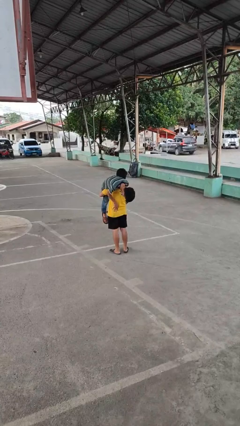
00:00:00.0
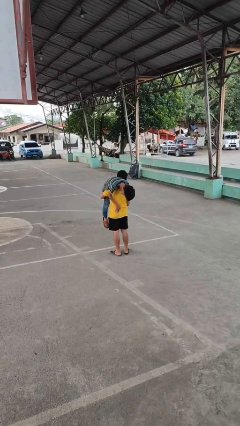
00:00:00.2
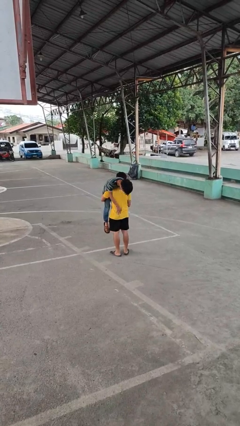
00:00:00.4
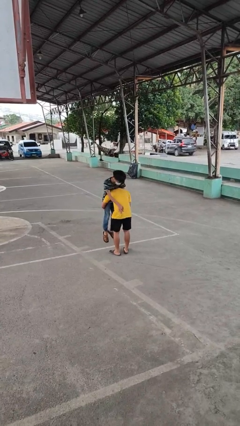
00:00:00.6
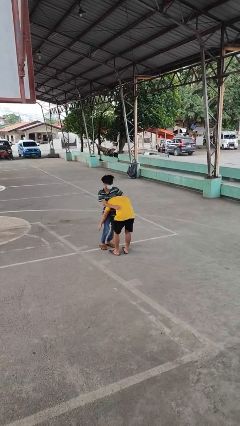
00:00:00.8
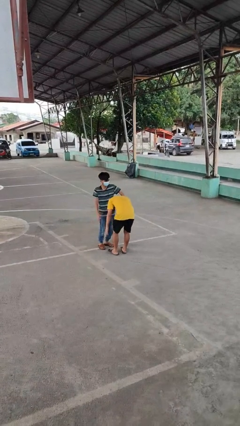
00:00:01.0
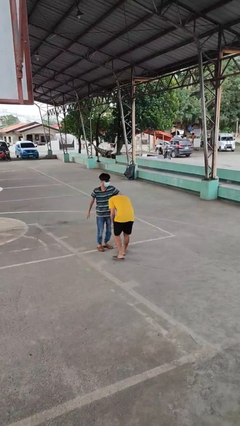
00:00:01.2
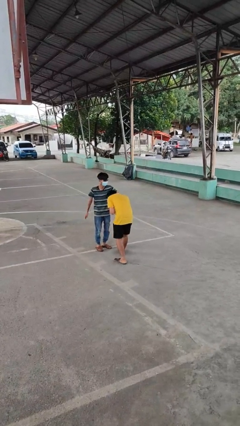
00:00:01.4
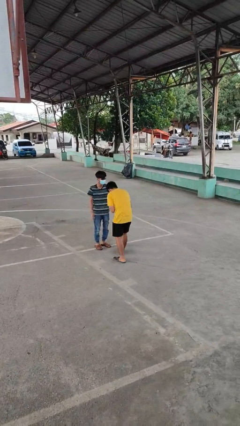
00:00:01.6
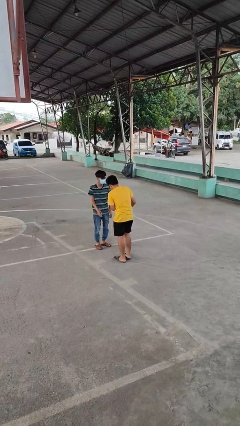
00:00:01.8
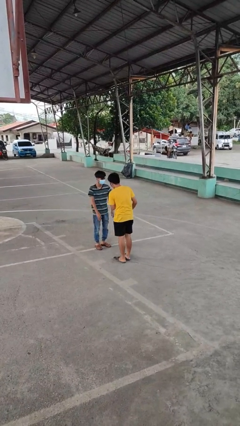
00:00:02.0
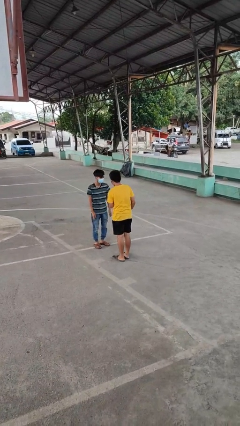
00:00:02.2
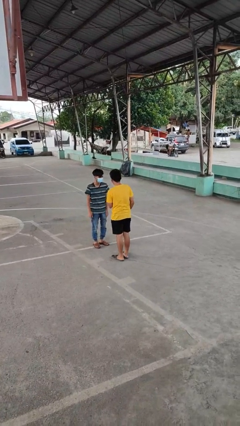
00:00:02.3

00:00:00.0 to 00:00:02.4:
person puts down person

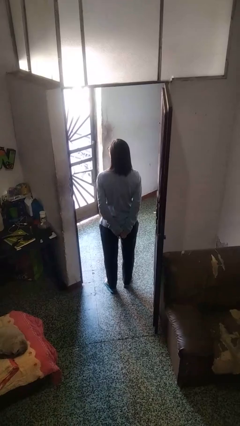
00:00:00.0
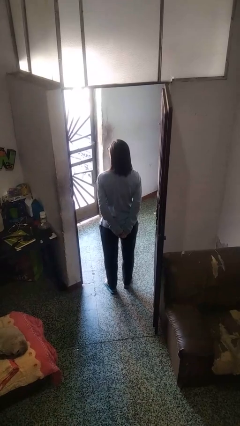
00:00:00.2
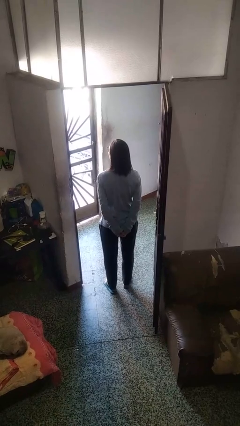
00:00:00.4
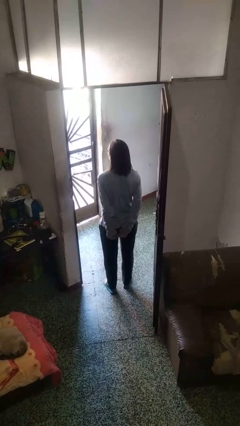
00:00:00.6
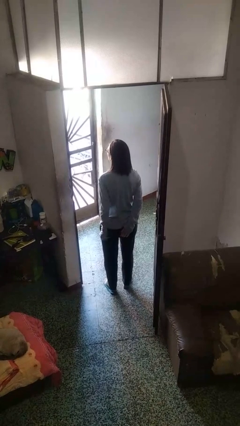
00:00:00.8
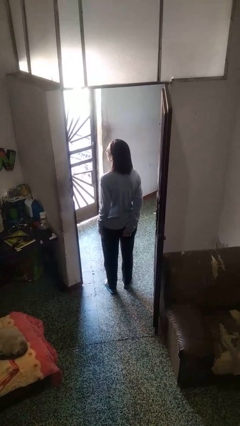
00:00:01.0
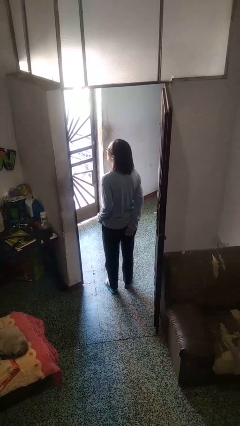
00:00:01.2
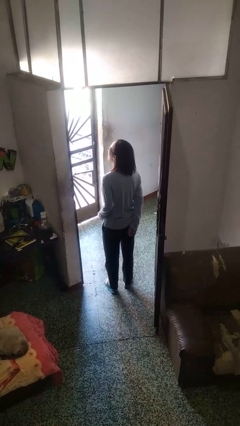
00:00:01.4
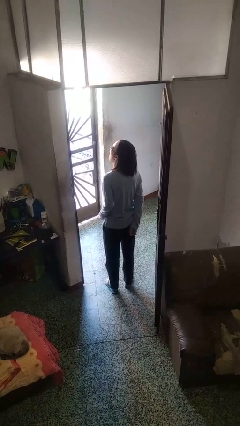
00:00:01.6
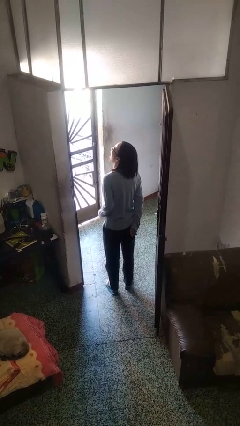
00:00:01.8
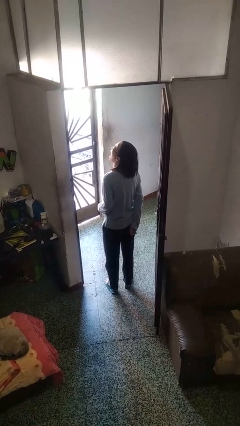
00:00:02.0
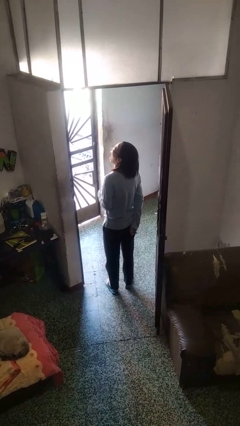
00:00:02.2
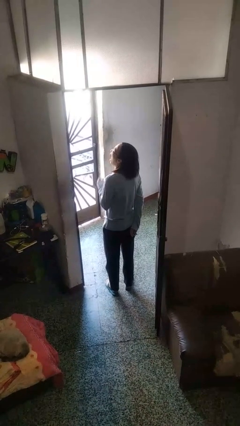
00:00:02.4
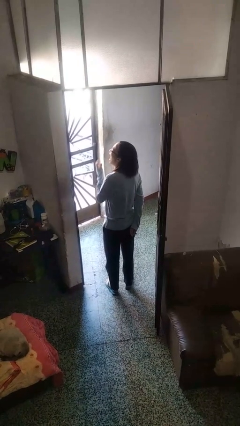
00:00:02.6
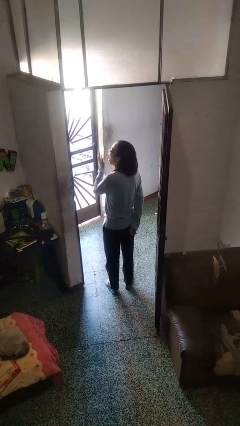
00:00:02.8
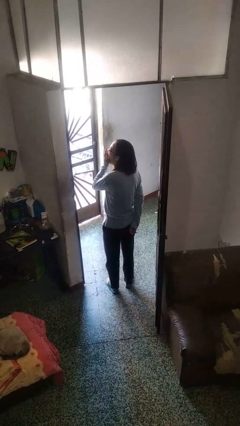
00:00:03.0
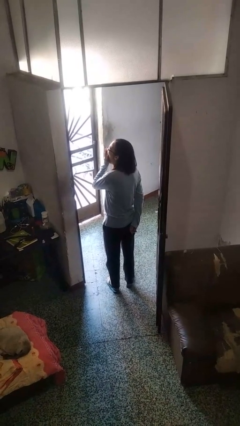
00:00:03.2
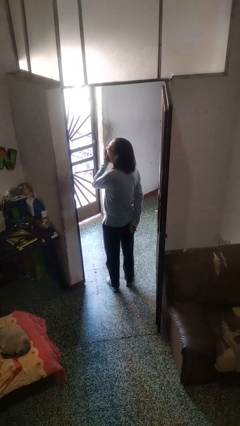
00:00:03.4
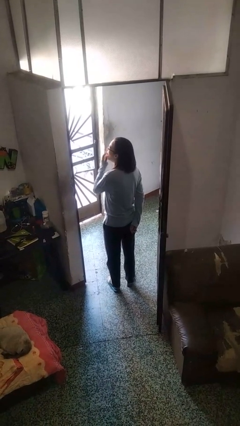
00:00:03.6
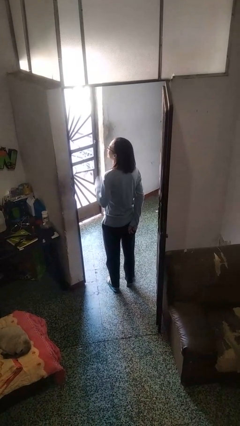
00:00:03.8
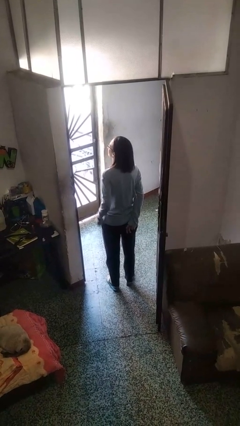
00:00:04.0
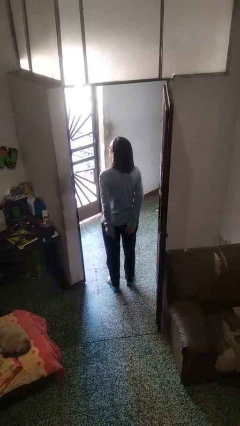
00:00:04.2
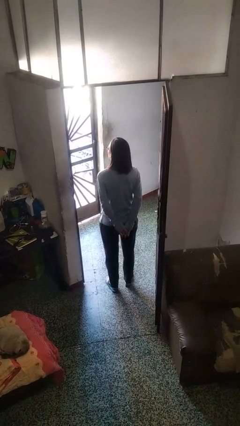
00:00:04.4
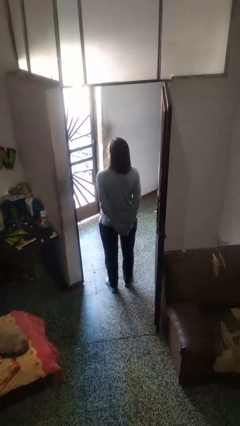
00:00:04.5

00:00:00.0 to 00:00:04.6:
person yawns

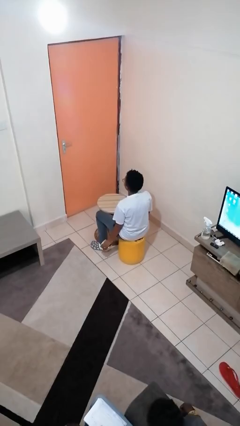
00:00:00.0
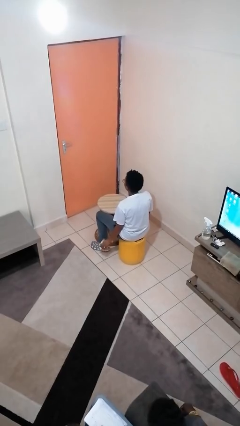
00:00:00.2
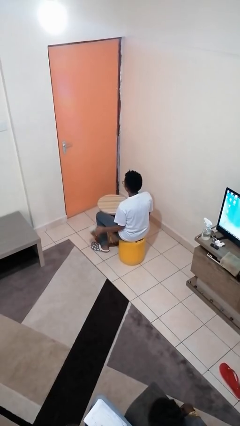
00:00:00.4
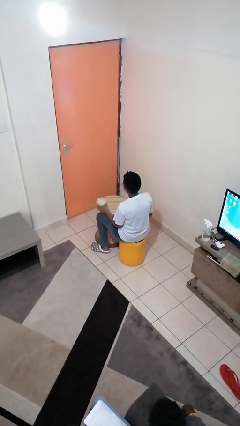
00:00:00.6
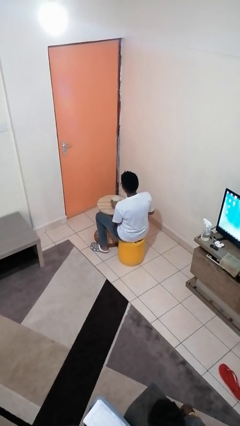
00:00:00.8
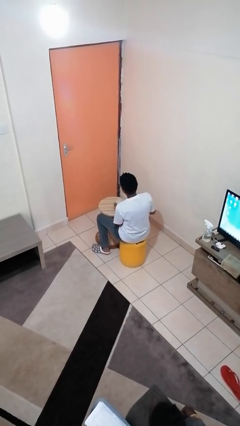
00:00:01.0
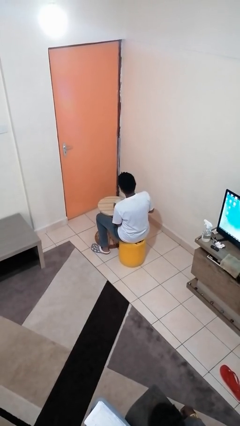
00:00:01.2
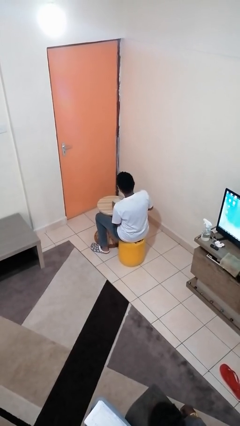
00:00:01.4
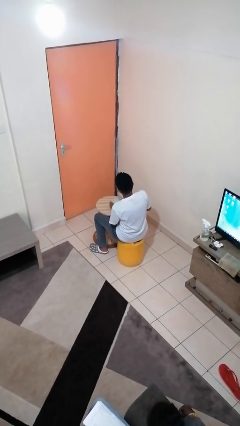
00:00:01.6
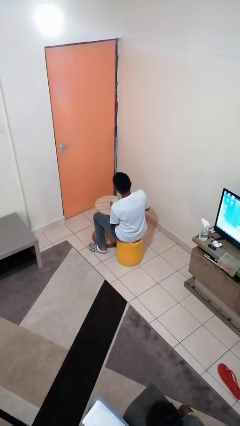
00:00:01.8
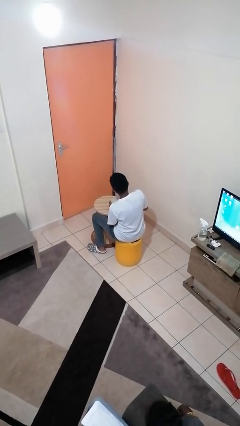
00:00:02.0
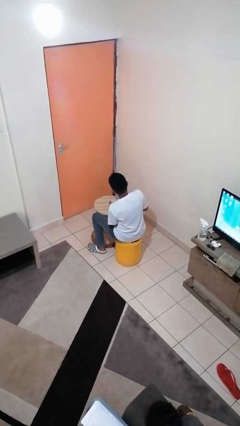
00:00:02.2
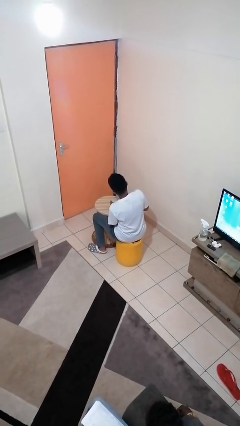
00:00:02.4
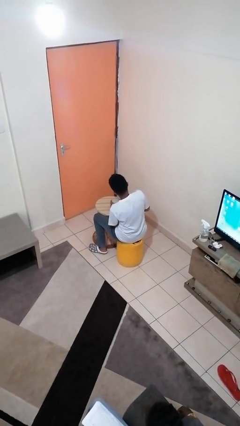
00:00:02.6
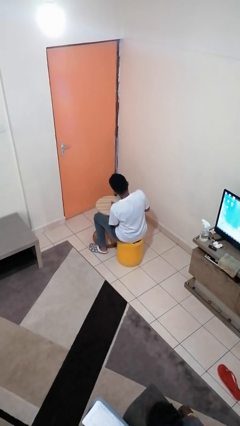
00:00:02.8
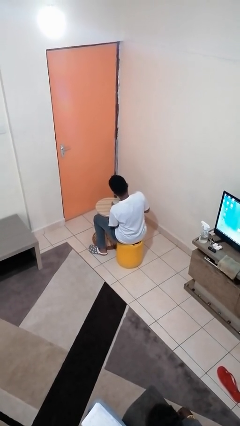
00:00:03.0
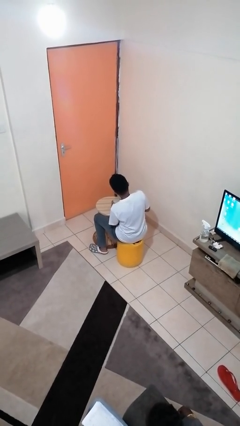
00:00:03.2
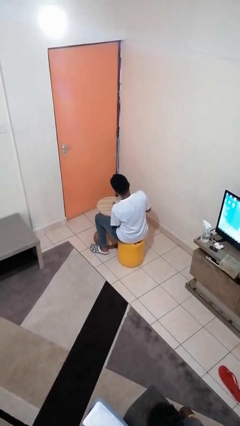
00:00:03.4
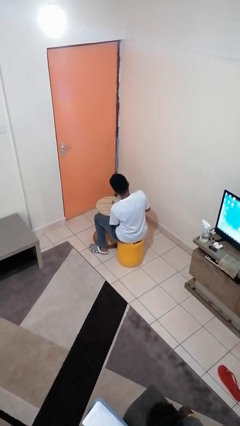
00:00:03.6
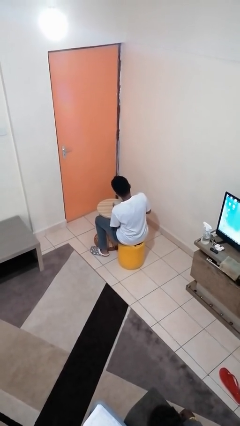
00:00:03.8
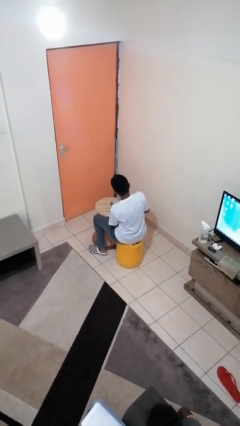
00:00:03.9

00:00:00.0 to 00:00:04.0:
person opens can with can opener

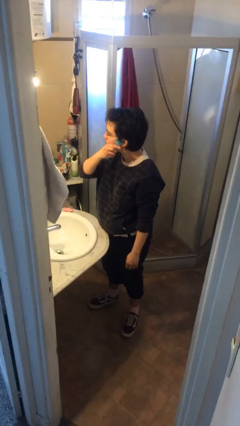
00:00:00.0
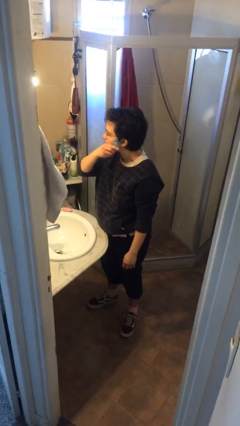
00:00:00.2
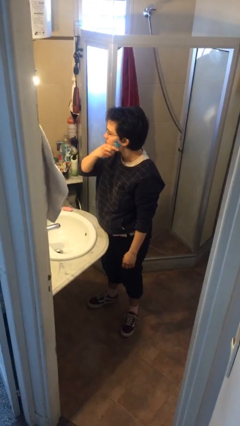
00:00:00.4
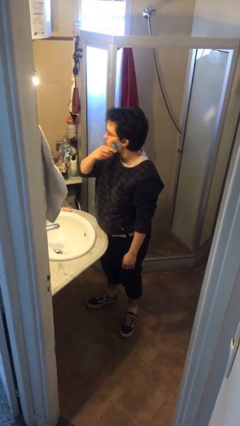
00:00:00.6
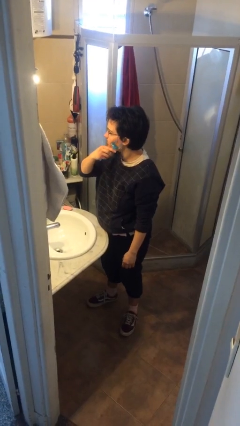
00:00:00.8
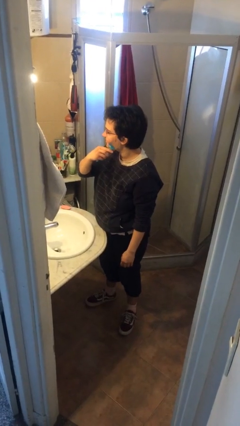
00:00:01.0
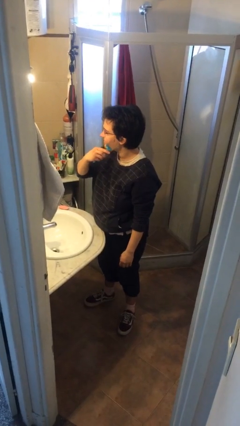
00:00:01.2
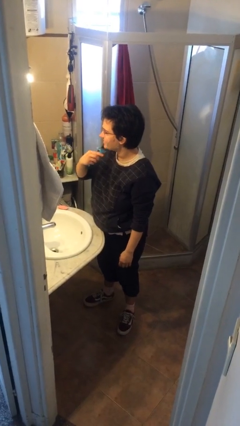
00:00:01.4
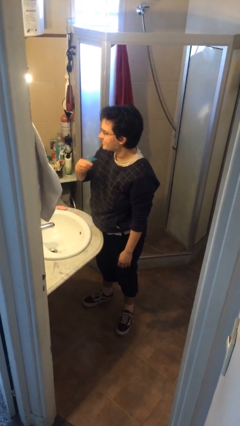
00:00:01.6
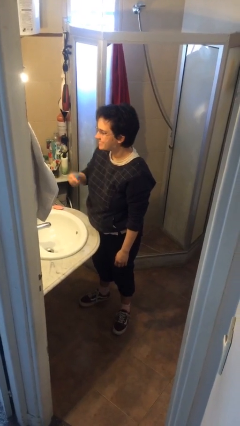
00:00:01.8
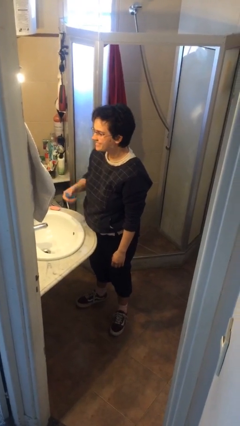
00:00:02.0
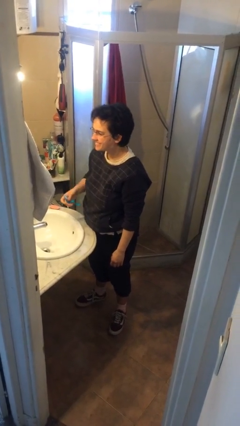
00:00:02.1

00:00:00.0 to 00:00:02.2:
person shaves face

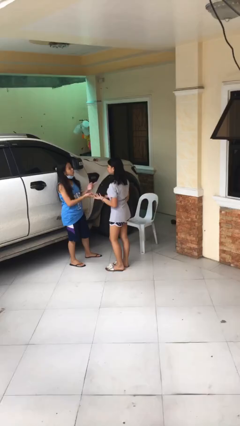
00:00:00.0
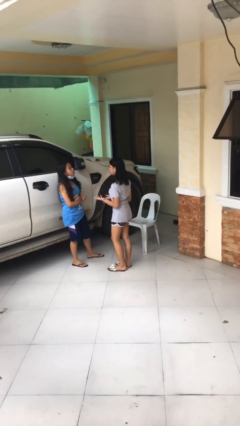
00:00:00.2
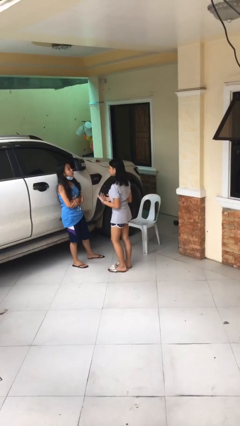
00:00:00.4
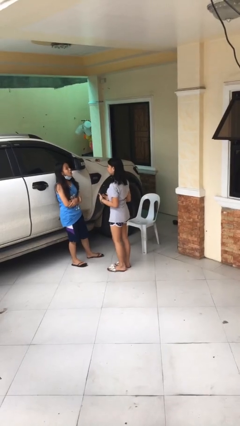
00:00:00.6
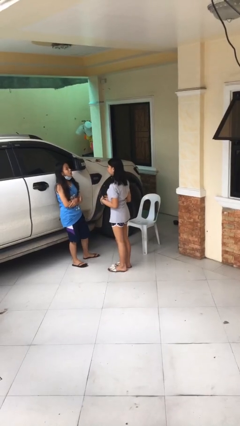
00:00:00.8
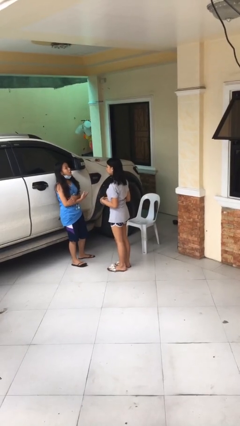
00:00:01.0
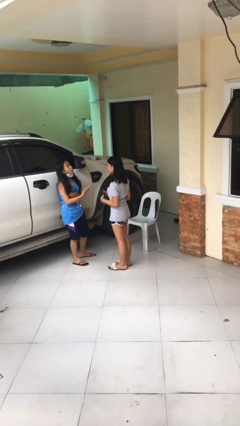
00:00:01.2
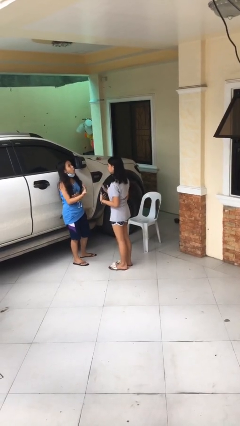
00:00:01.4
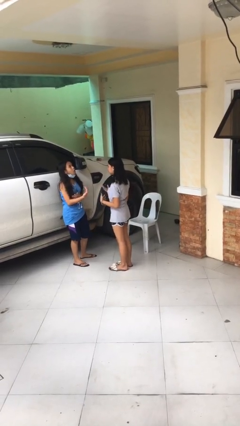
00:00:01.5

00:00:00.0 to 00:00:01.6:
person talks to person

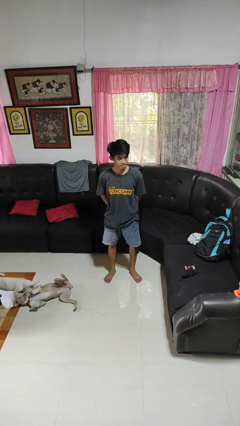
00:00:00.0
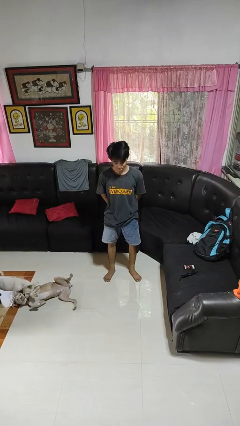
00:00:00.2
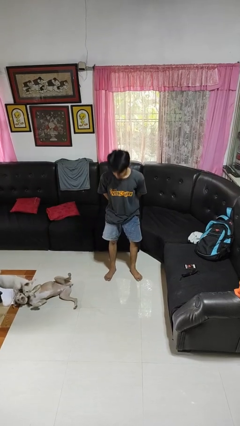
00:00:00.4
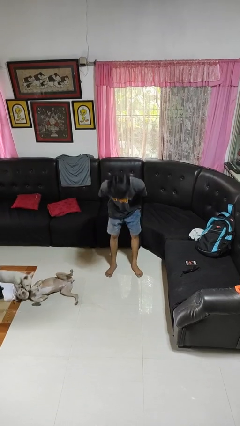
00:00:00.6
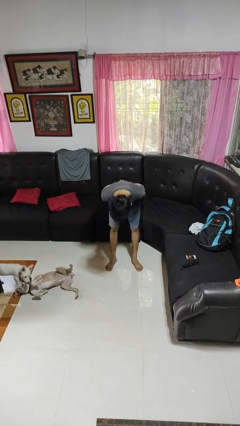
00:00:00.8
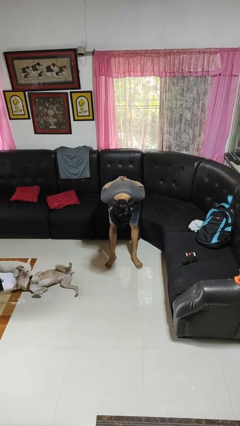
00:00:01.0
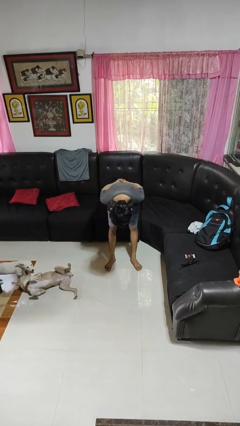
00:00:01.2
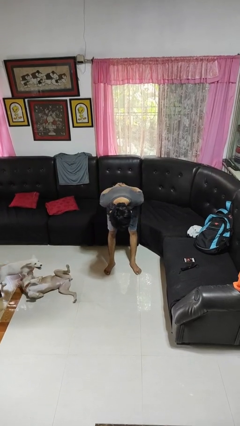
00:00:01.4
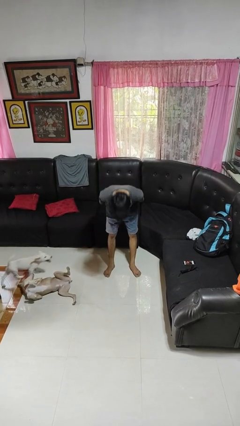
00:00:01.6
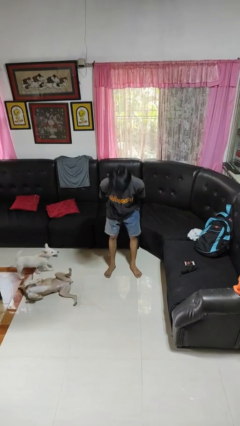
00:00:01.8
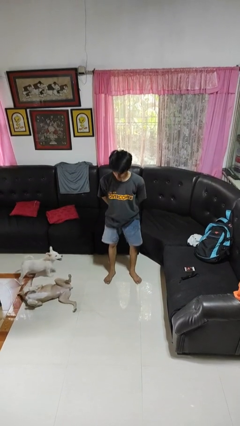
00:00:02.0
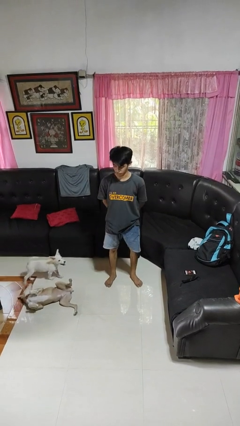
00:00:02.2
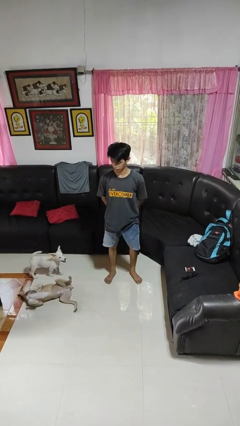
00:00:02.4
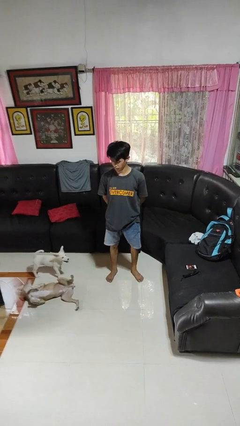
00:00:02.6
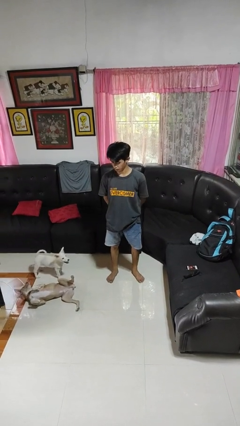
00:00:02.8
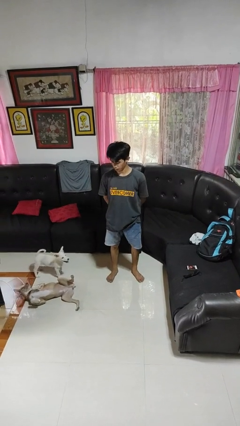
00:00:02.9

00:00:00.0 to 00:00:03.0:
person bows
